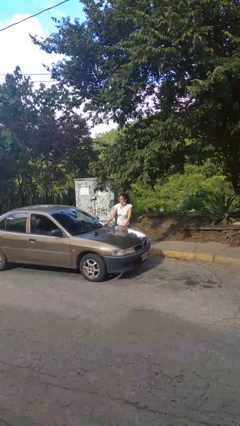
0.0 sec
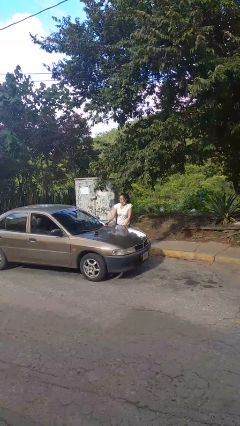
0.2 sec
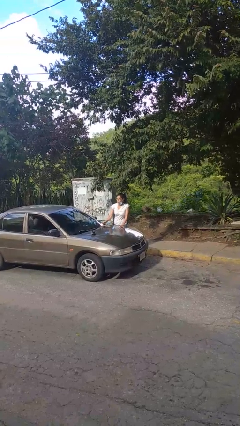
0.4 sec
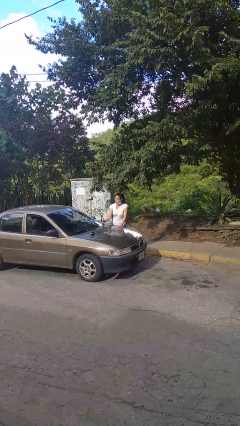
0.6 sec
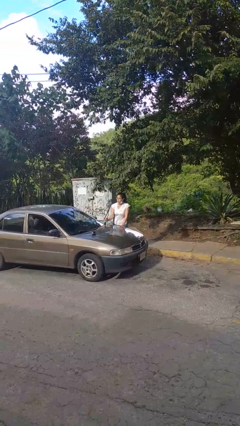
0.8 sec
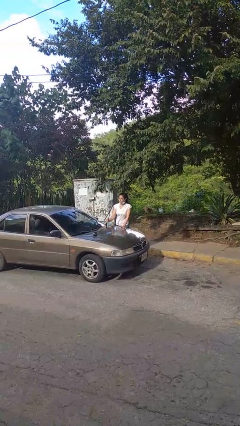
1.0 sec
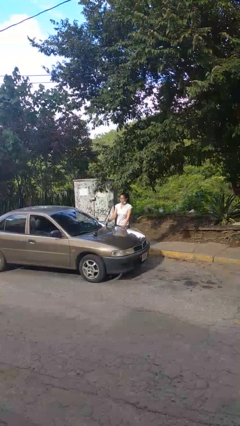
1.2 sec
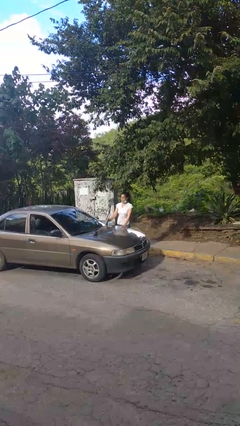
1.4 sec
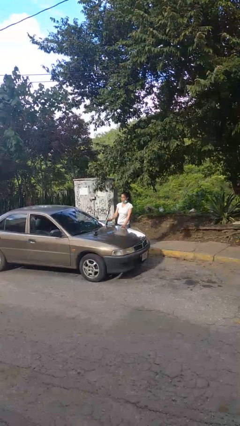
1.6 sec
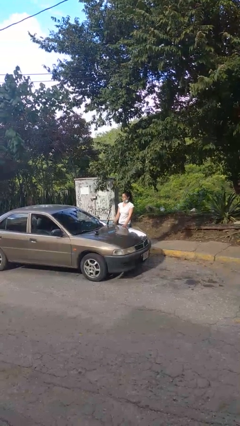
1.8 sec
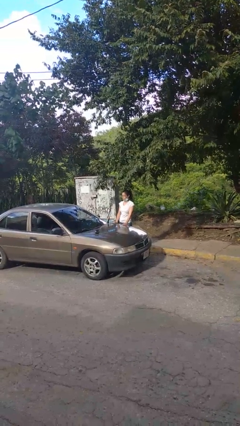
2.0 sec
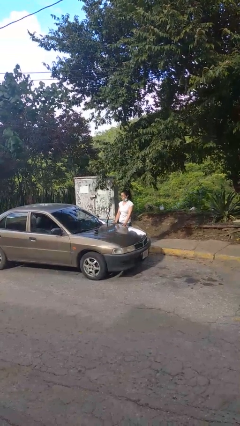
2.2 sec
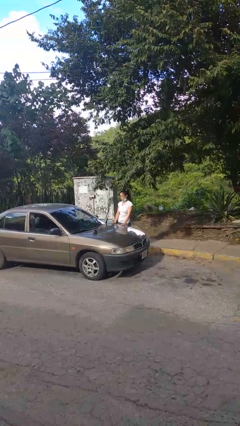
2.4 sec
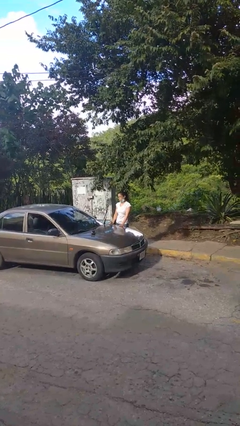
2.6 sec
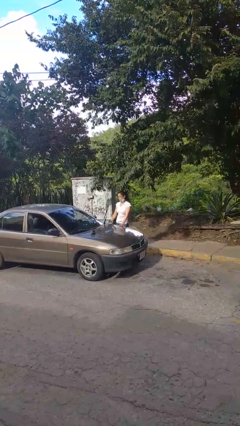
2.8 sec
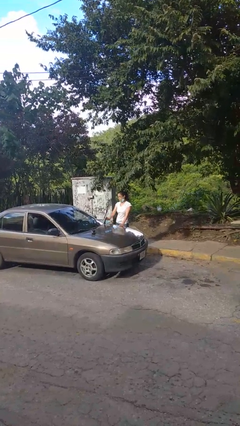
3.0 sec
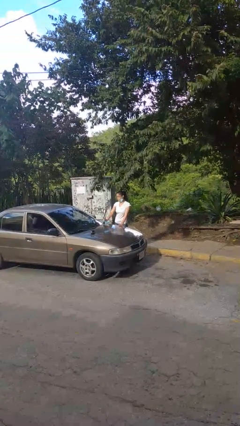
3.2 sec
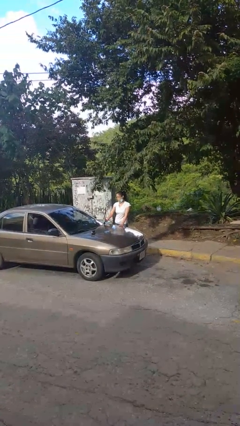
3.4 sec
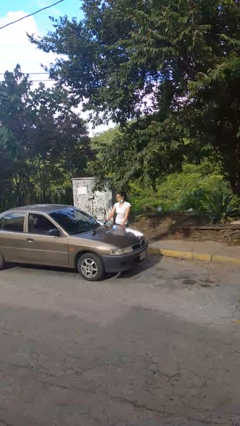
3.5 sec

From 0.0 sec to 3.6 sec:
person flips up car wipers

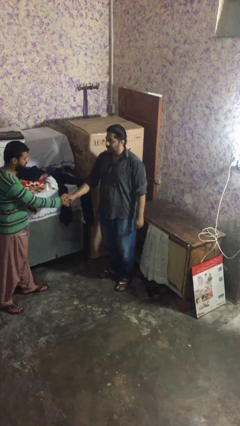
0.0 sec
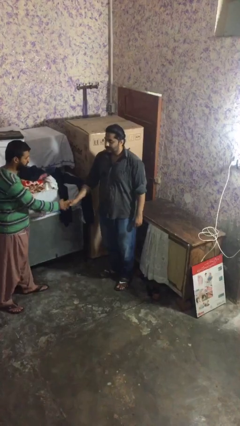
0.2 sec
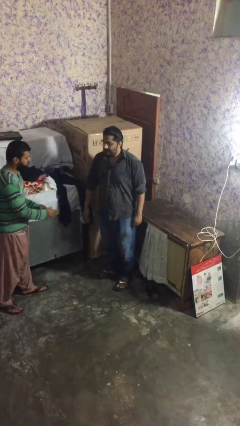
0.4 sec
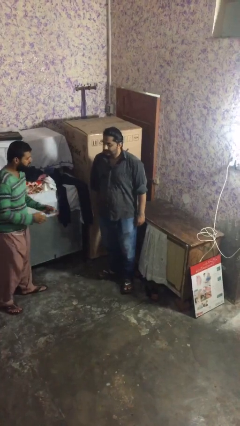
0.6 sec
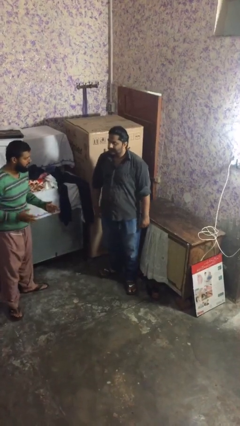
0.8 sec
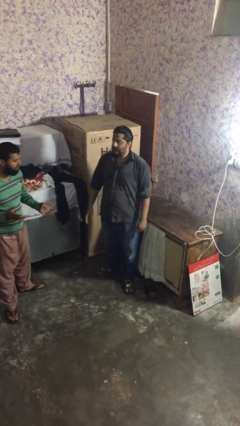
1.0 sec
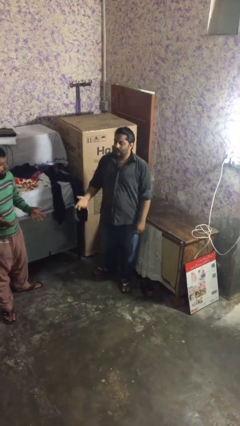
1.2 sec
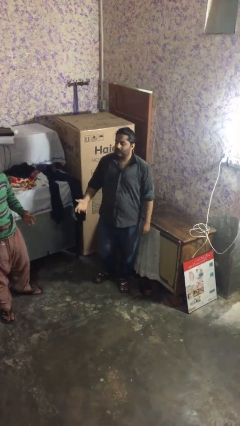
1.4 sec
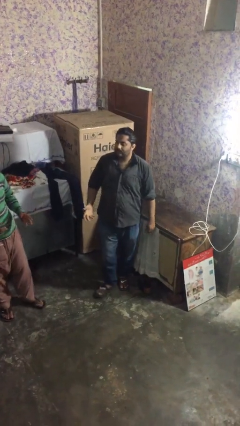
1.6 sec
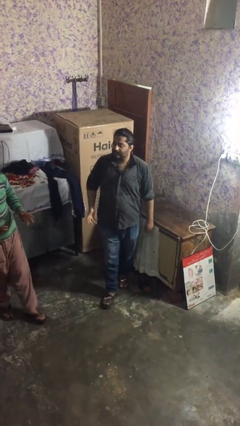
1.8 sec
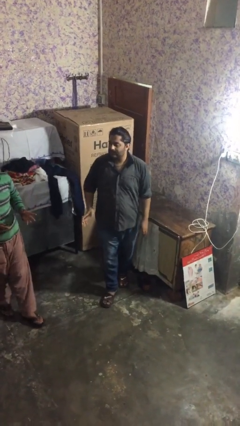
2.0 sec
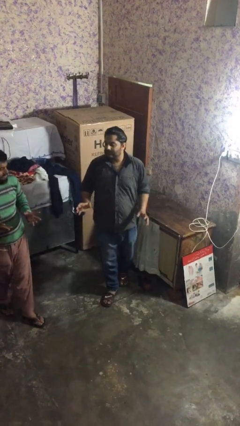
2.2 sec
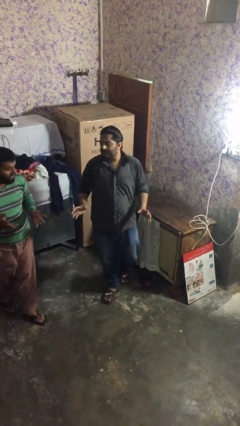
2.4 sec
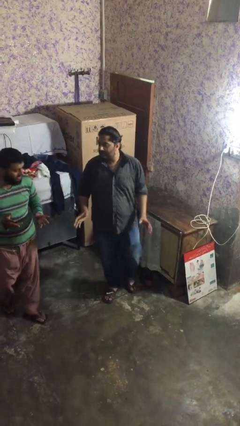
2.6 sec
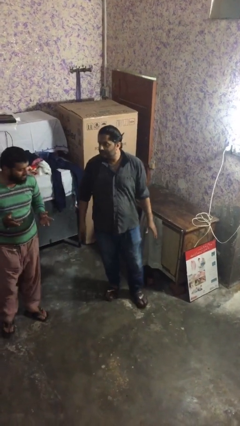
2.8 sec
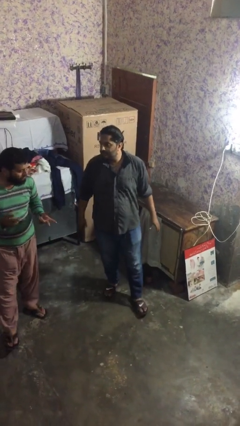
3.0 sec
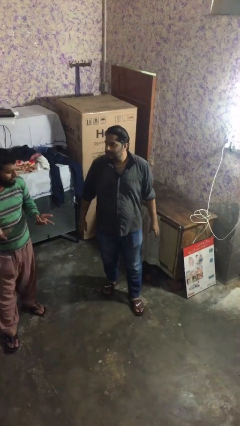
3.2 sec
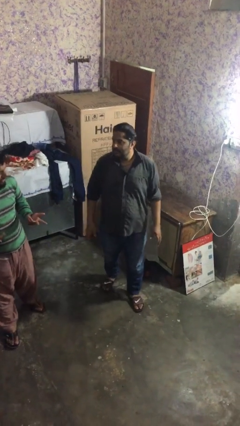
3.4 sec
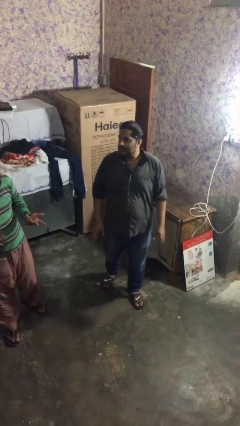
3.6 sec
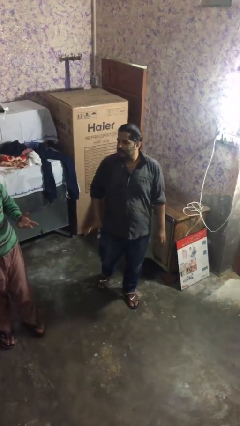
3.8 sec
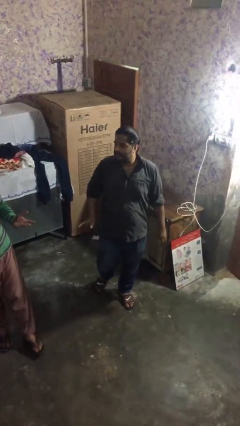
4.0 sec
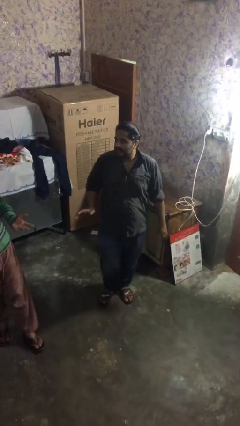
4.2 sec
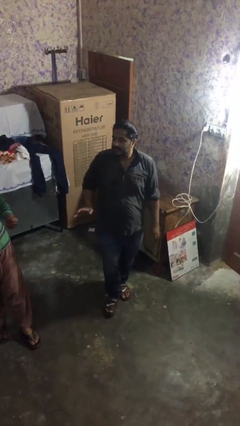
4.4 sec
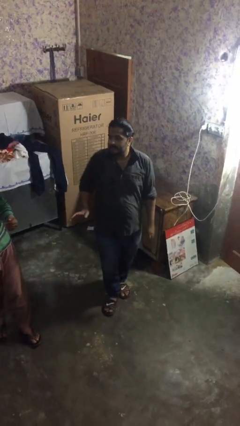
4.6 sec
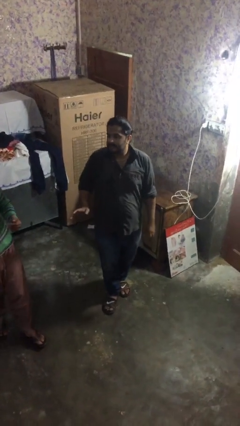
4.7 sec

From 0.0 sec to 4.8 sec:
person talks to person

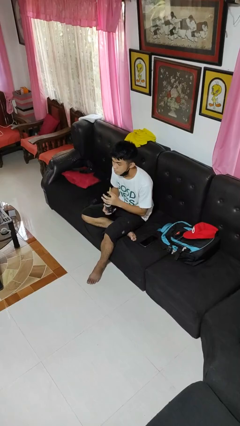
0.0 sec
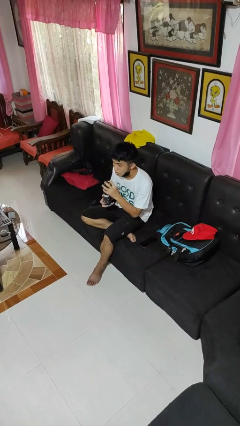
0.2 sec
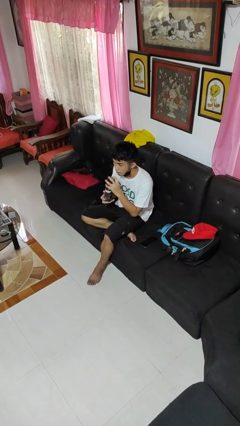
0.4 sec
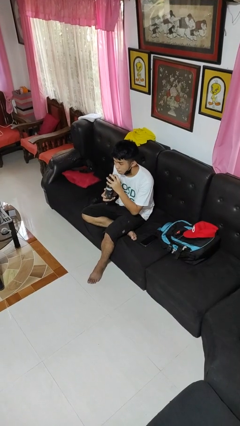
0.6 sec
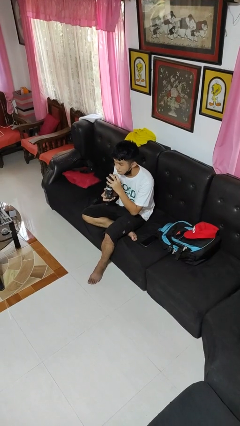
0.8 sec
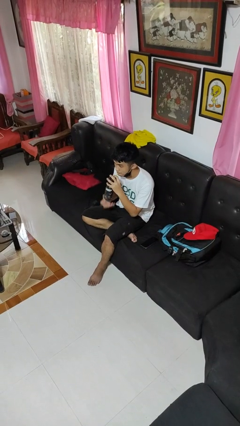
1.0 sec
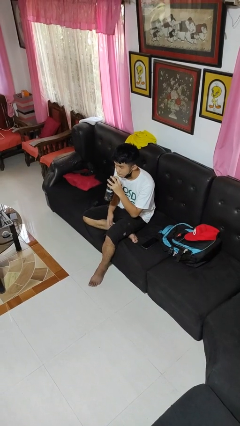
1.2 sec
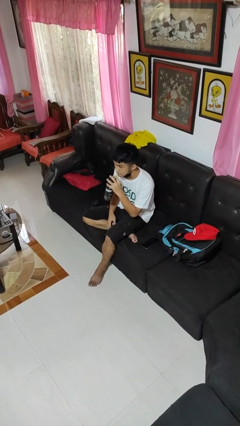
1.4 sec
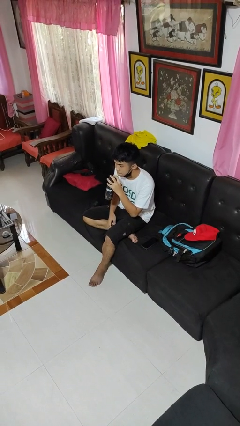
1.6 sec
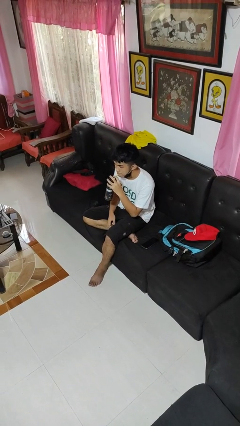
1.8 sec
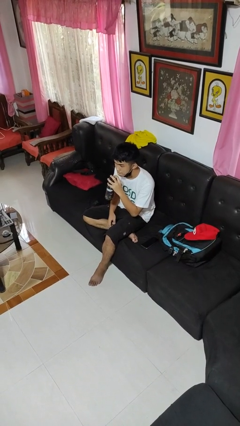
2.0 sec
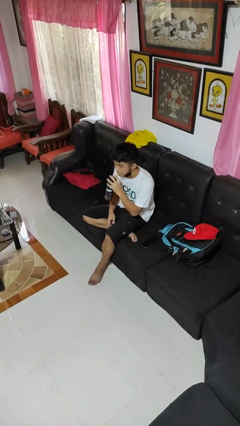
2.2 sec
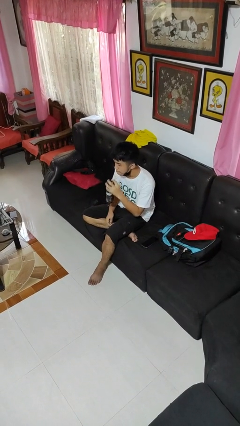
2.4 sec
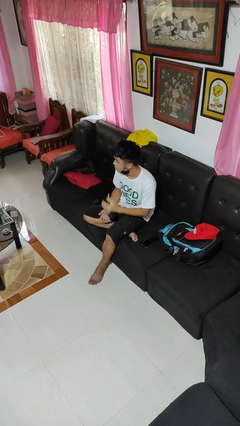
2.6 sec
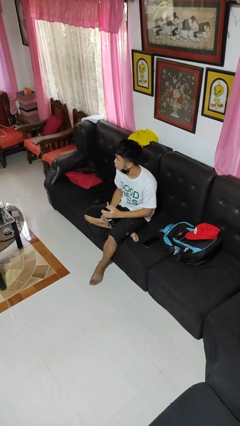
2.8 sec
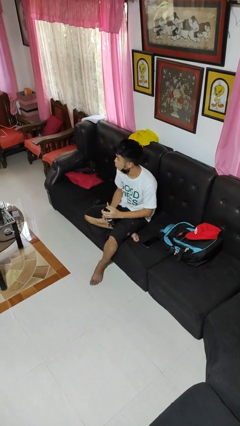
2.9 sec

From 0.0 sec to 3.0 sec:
person drinks from straw

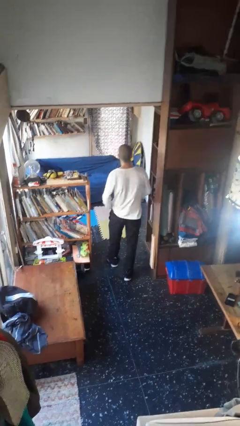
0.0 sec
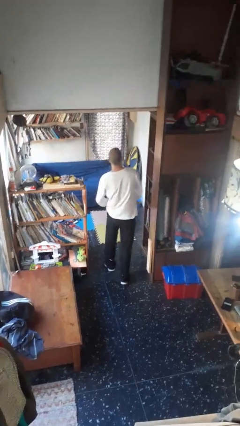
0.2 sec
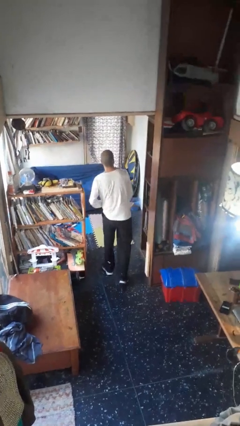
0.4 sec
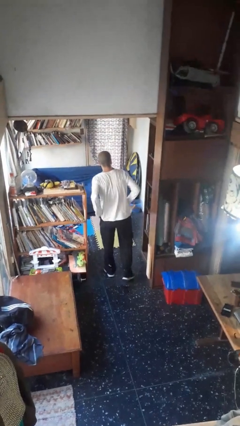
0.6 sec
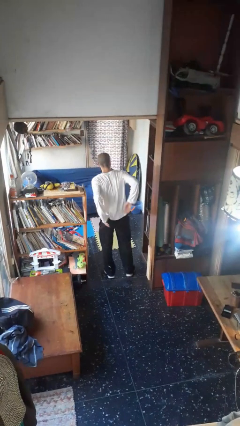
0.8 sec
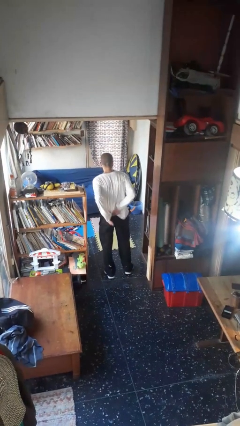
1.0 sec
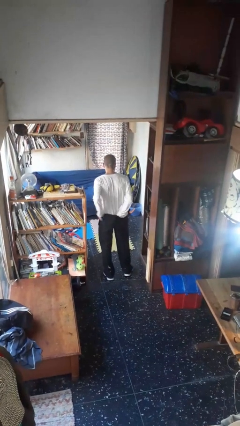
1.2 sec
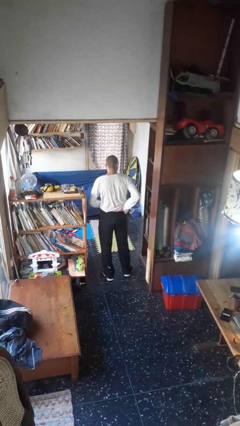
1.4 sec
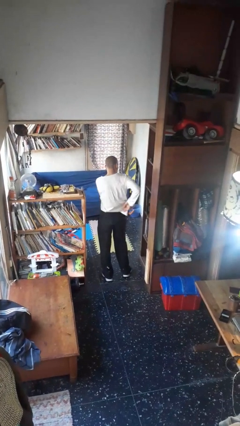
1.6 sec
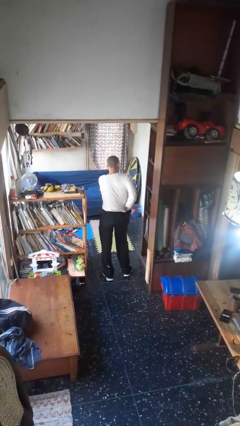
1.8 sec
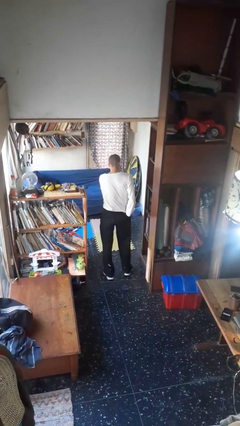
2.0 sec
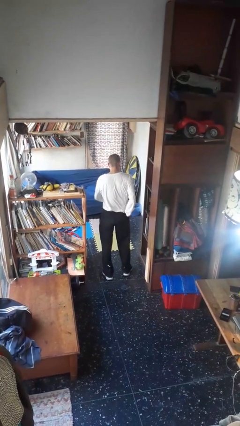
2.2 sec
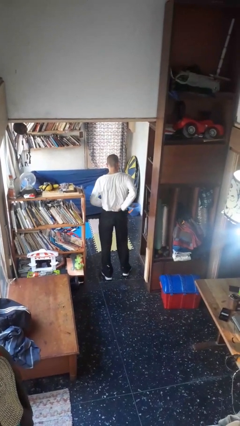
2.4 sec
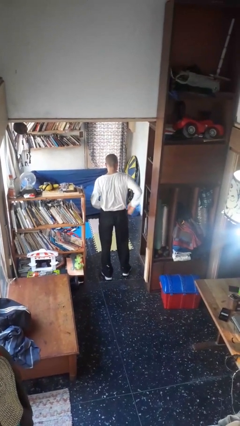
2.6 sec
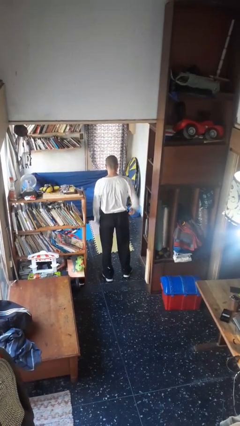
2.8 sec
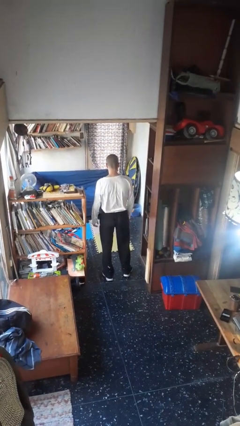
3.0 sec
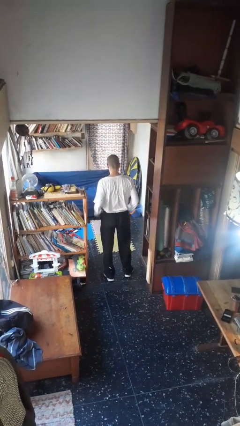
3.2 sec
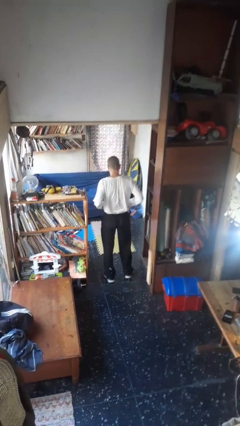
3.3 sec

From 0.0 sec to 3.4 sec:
person tucks in shirt

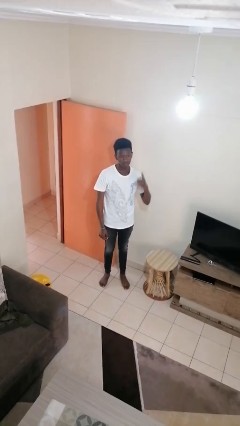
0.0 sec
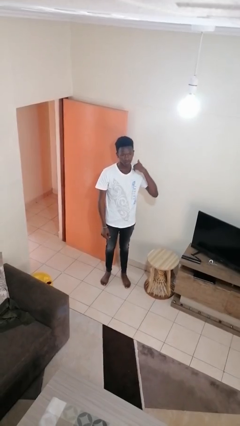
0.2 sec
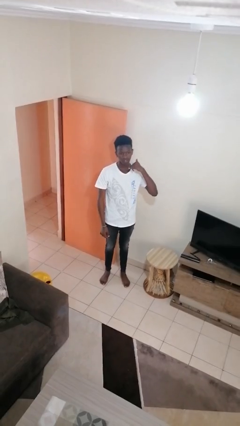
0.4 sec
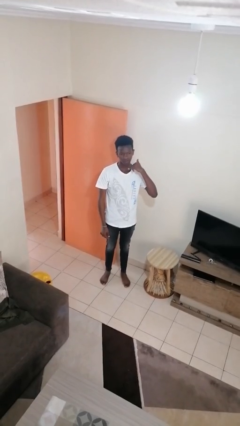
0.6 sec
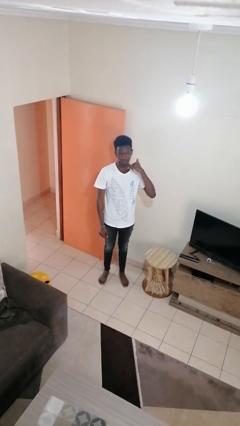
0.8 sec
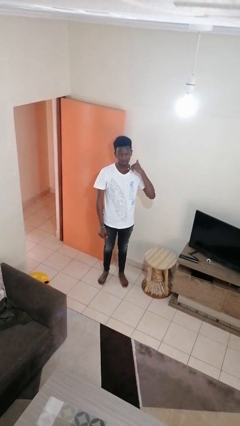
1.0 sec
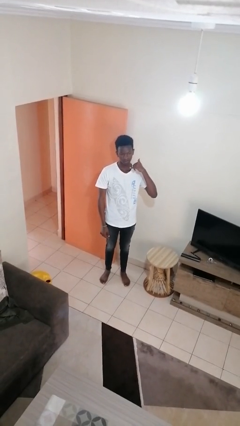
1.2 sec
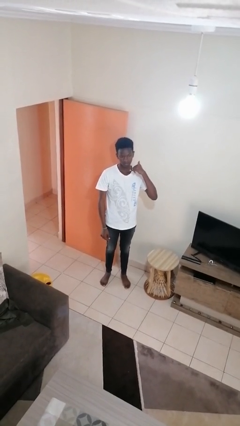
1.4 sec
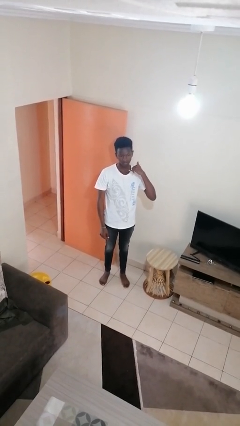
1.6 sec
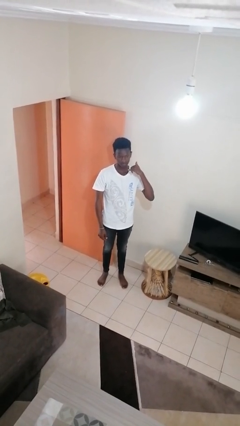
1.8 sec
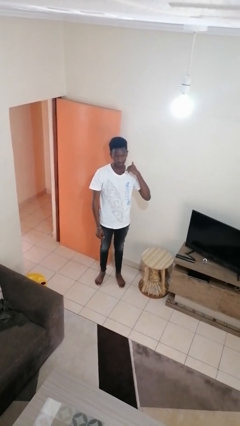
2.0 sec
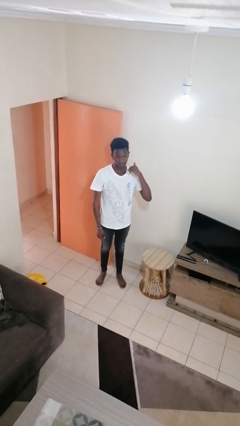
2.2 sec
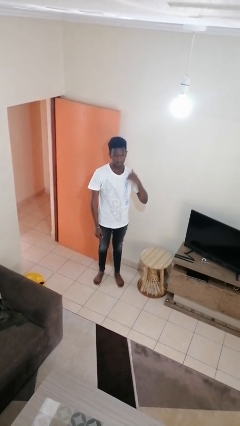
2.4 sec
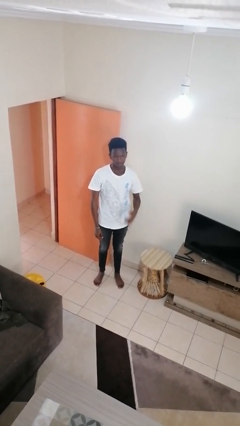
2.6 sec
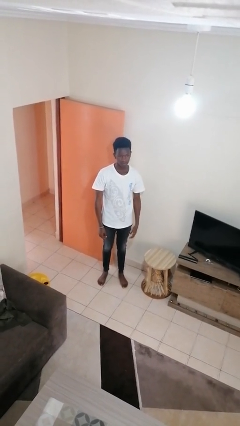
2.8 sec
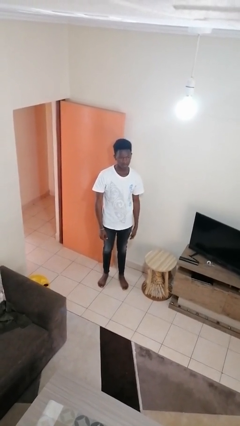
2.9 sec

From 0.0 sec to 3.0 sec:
person gestures call me
